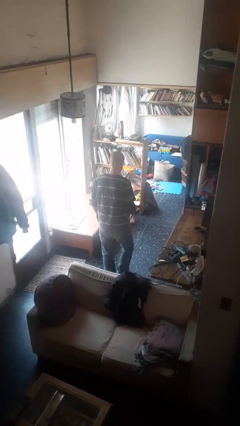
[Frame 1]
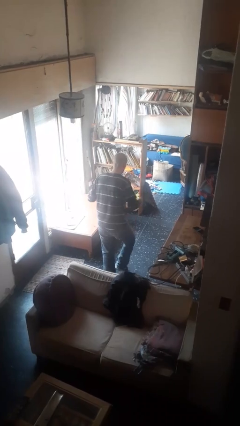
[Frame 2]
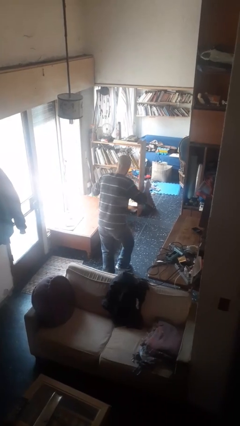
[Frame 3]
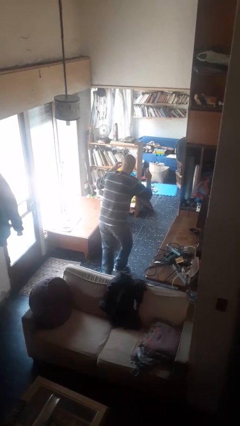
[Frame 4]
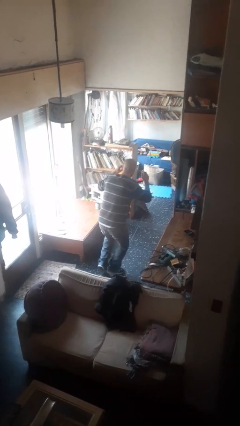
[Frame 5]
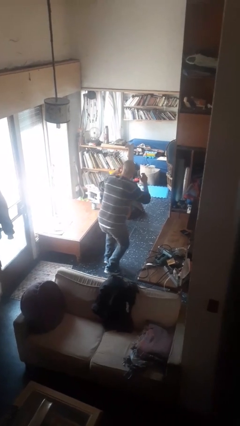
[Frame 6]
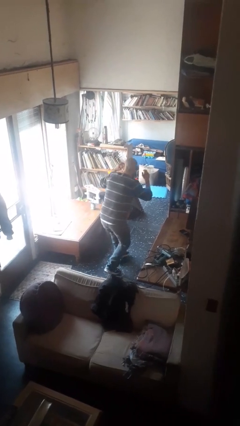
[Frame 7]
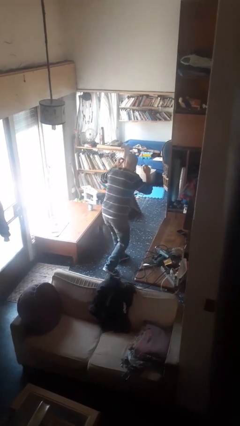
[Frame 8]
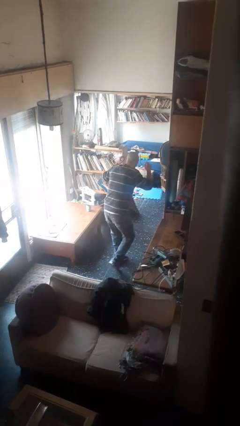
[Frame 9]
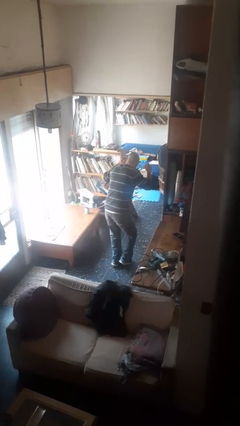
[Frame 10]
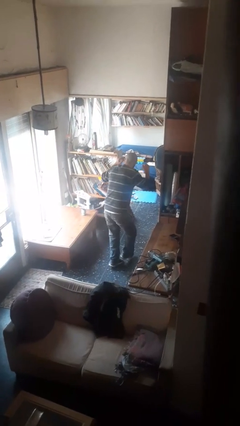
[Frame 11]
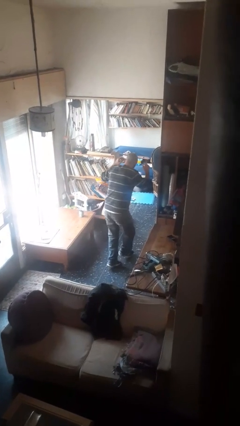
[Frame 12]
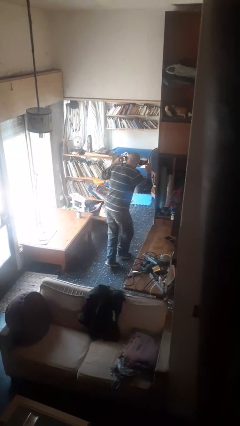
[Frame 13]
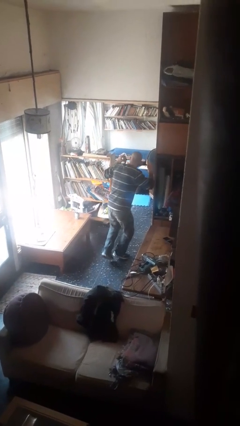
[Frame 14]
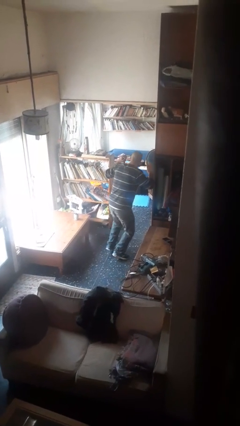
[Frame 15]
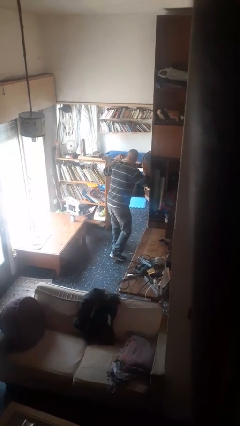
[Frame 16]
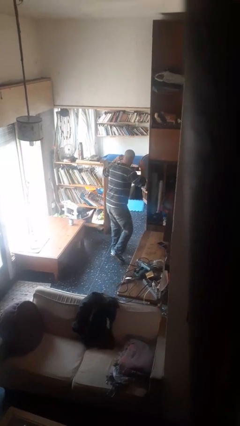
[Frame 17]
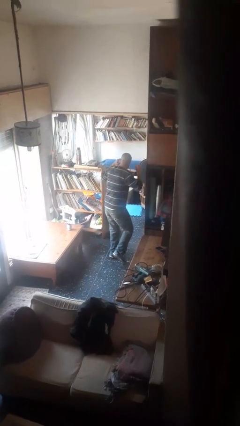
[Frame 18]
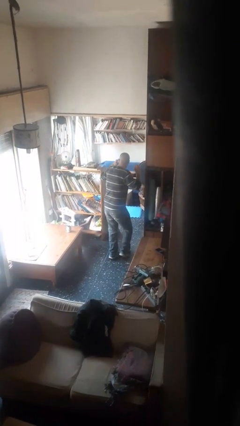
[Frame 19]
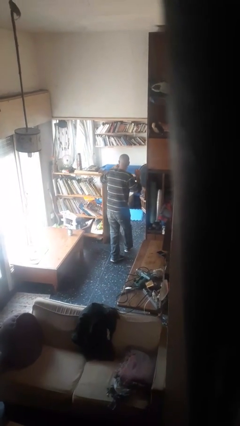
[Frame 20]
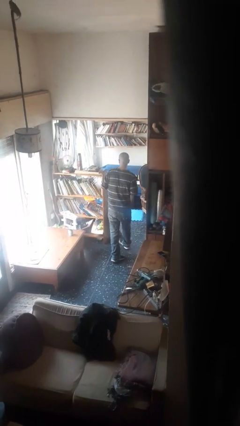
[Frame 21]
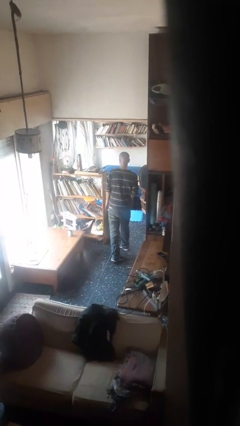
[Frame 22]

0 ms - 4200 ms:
person walks tiptoe

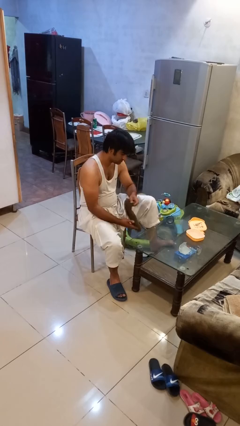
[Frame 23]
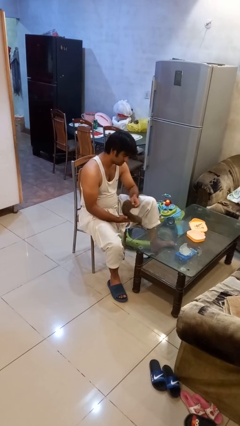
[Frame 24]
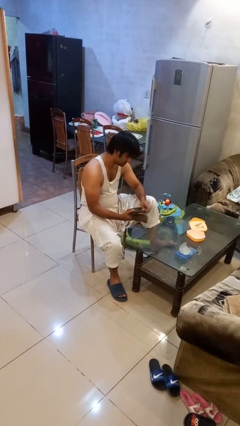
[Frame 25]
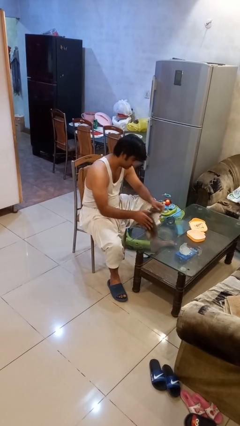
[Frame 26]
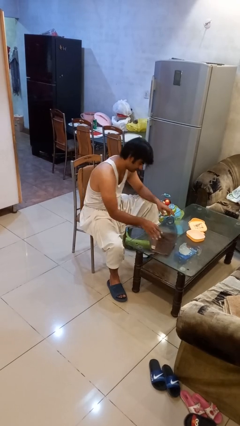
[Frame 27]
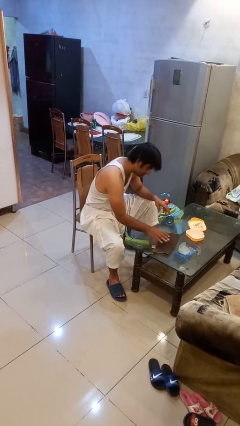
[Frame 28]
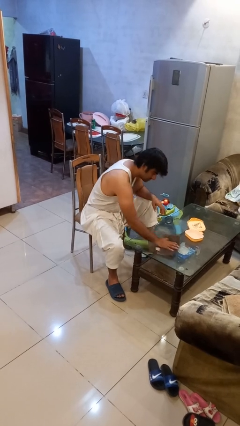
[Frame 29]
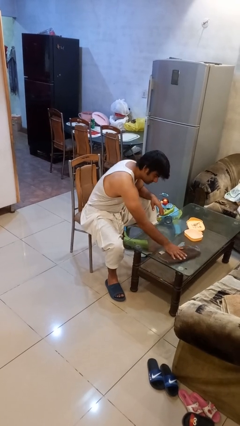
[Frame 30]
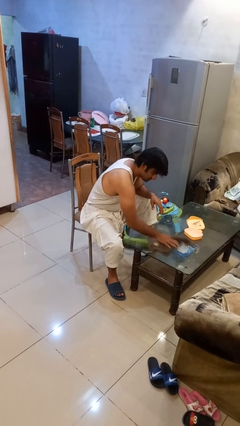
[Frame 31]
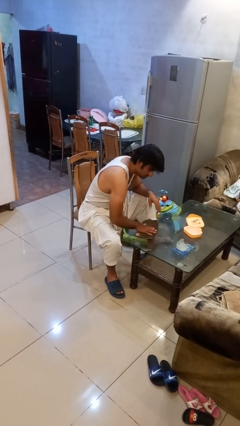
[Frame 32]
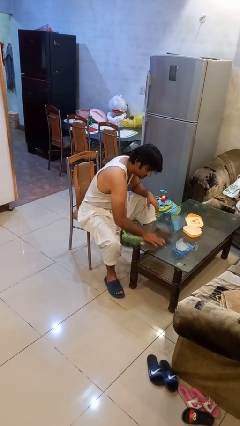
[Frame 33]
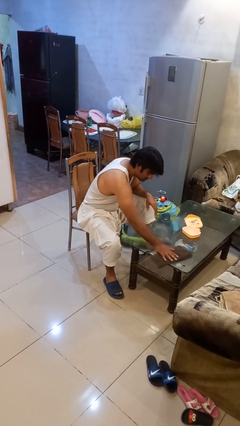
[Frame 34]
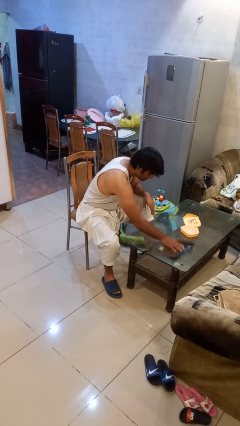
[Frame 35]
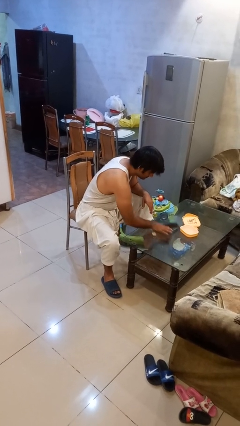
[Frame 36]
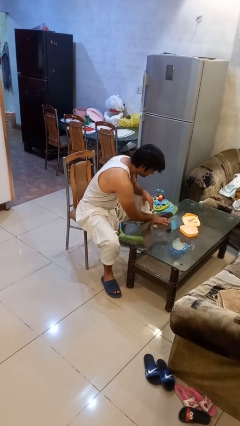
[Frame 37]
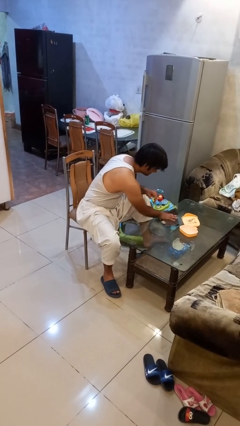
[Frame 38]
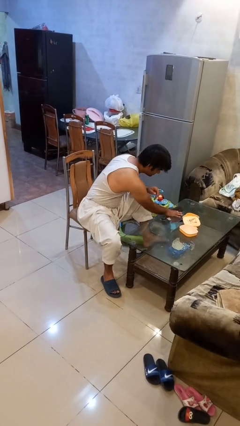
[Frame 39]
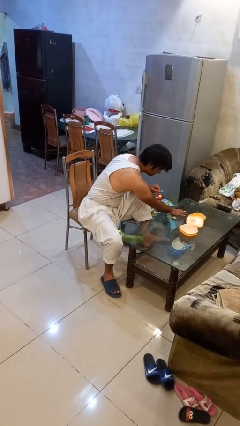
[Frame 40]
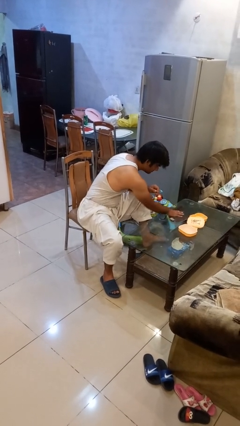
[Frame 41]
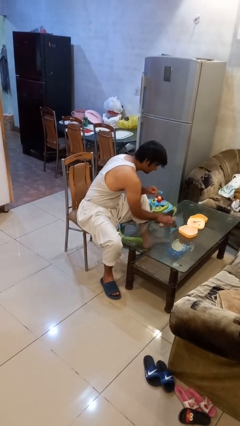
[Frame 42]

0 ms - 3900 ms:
person cleans table with rag

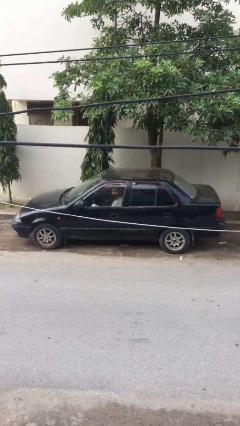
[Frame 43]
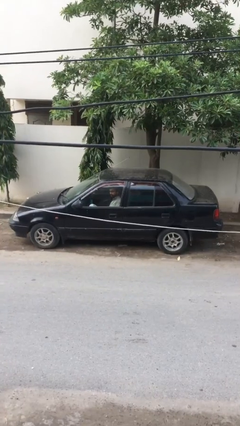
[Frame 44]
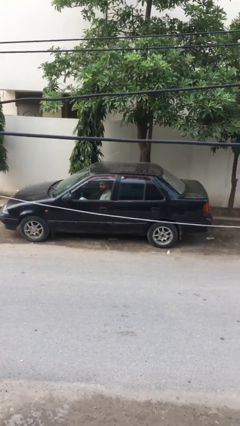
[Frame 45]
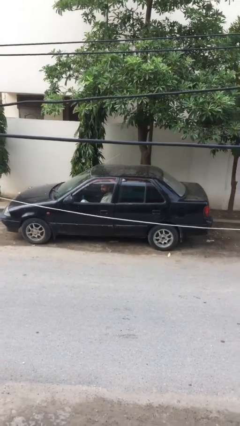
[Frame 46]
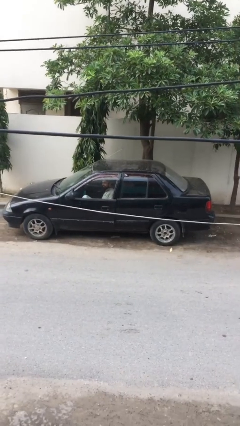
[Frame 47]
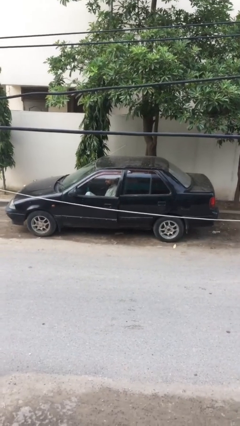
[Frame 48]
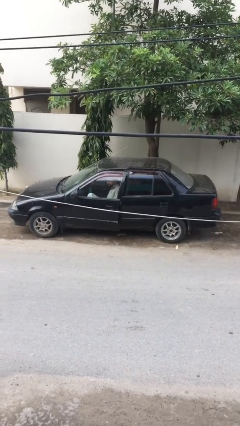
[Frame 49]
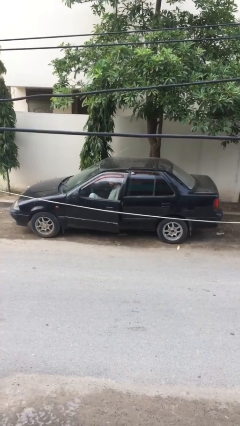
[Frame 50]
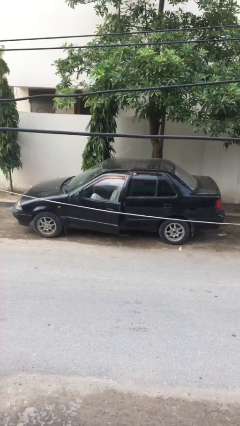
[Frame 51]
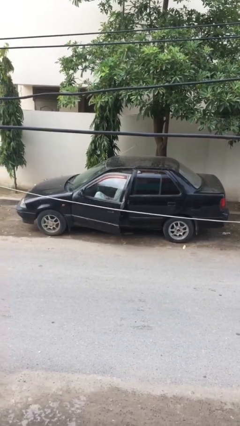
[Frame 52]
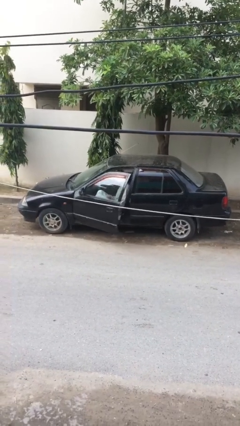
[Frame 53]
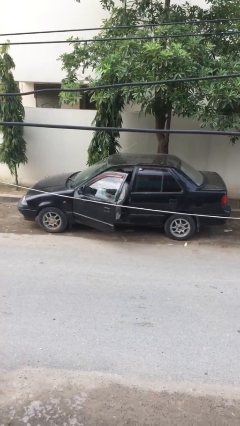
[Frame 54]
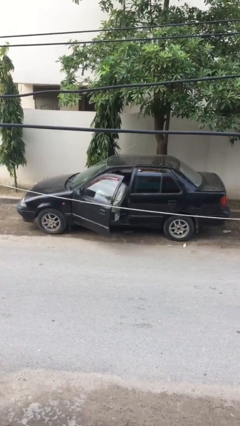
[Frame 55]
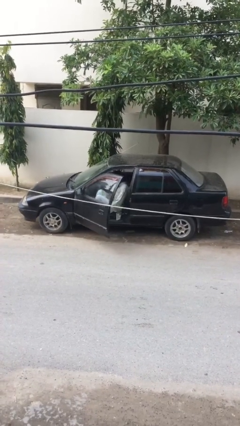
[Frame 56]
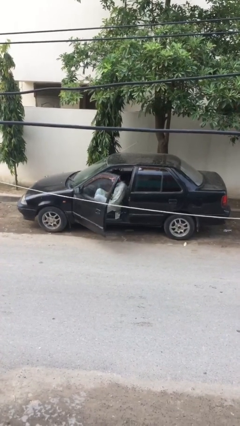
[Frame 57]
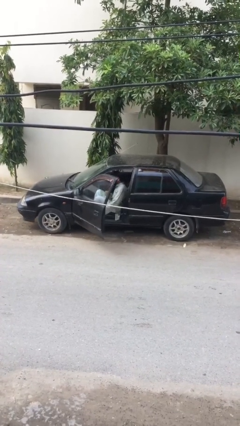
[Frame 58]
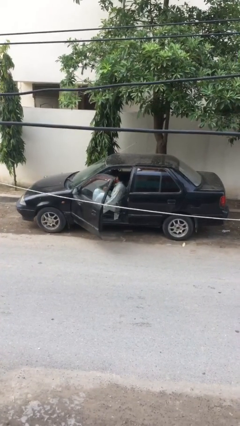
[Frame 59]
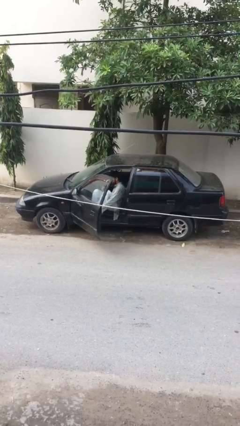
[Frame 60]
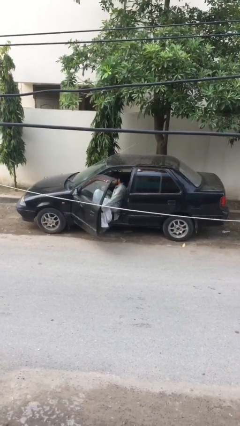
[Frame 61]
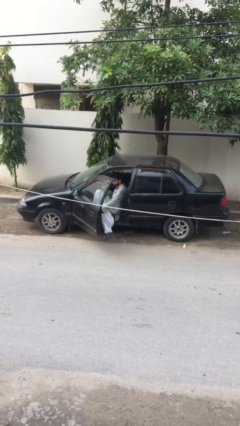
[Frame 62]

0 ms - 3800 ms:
person opens car door

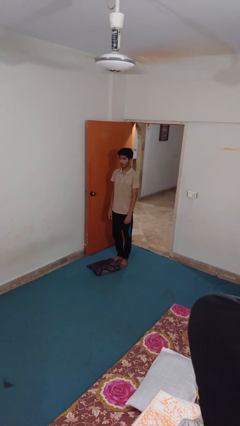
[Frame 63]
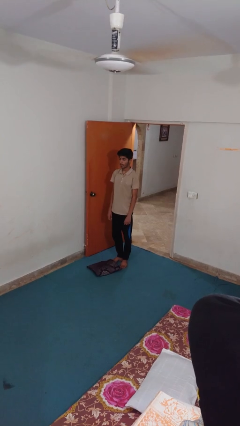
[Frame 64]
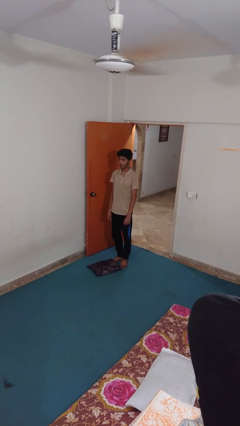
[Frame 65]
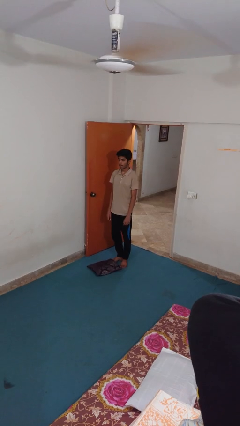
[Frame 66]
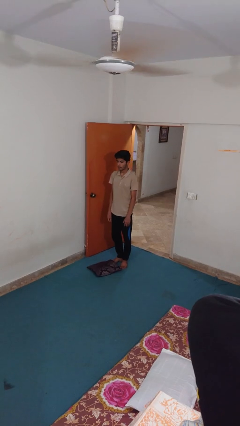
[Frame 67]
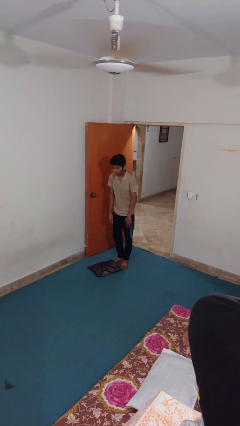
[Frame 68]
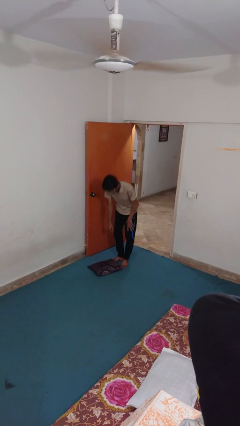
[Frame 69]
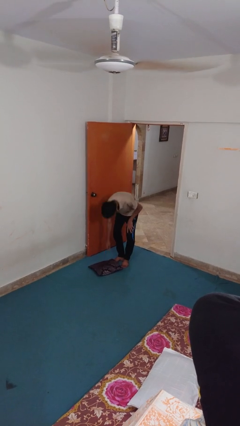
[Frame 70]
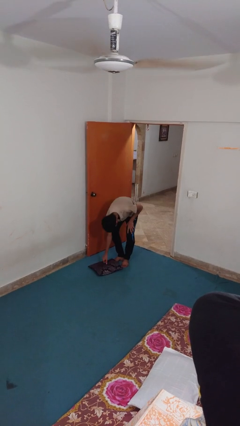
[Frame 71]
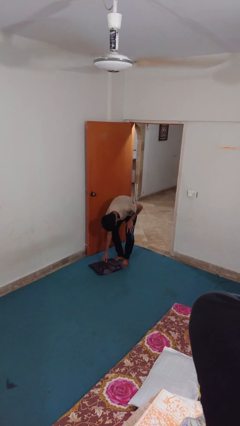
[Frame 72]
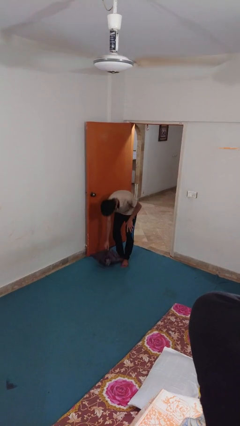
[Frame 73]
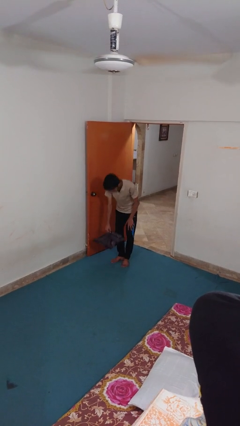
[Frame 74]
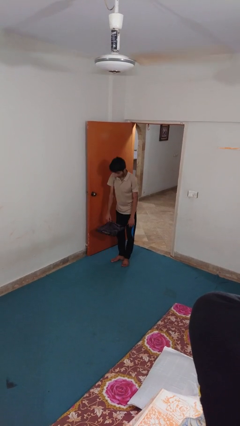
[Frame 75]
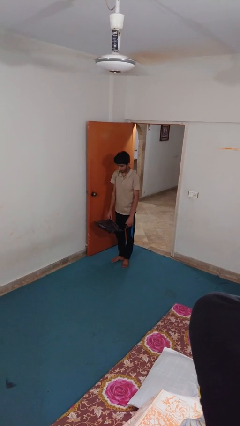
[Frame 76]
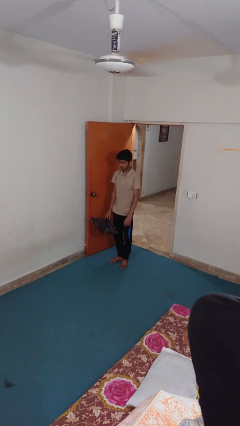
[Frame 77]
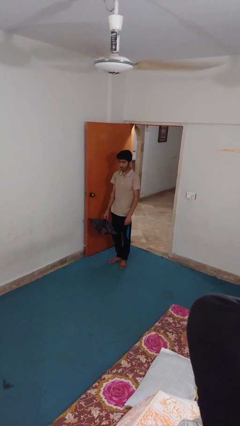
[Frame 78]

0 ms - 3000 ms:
person picks up object from floor

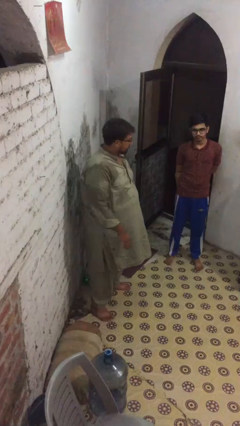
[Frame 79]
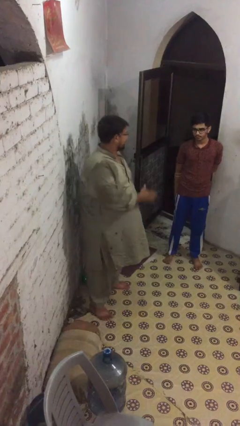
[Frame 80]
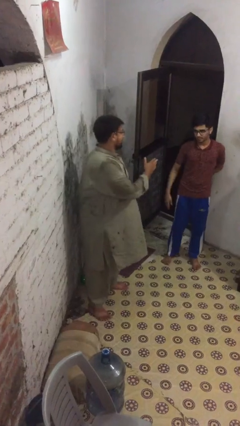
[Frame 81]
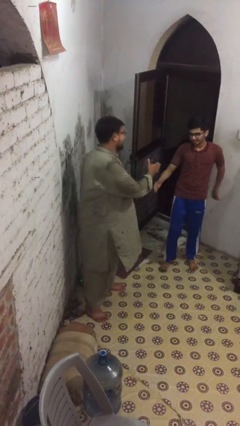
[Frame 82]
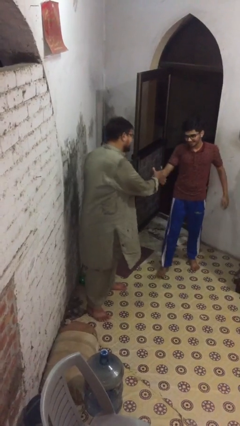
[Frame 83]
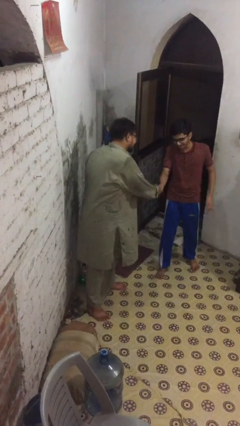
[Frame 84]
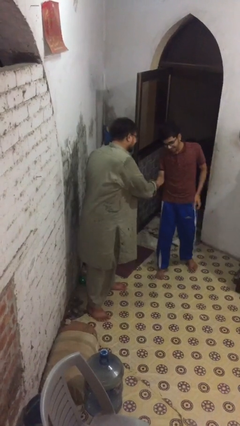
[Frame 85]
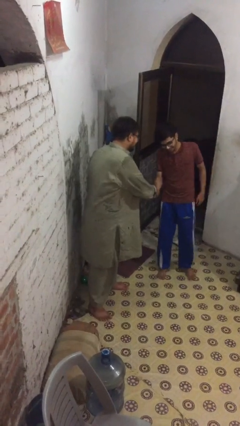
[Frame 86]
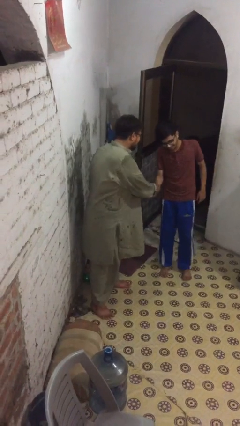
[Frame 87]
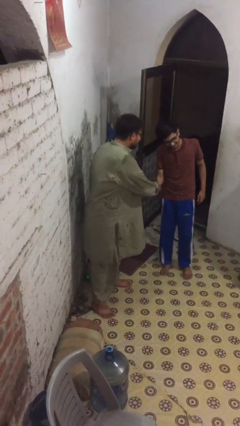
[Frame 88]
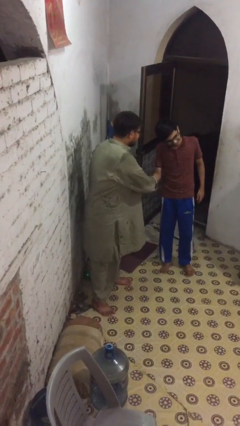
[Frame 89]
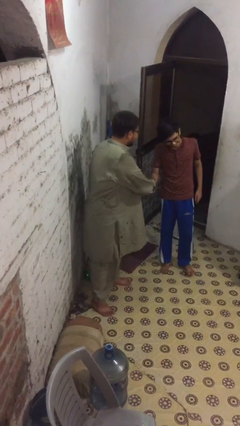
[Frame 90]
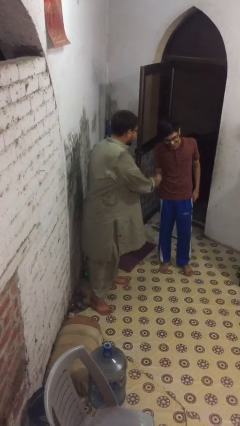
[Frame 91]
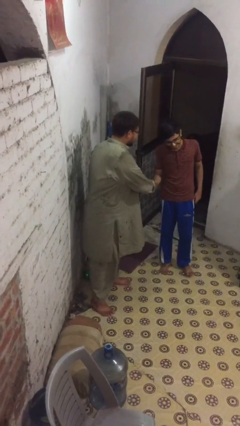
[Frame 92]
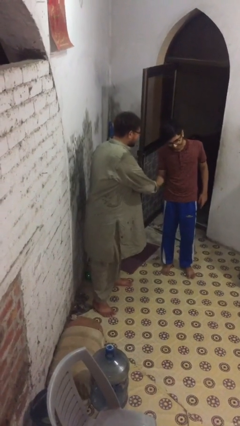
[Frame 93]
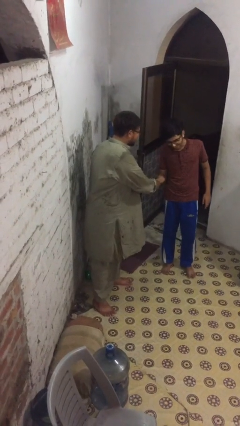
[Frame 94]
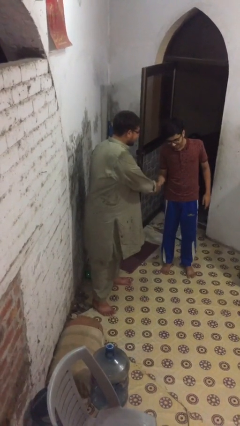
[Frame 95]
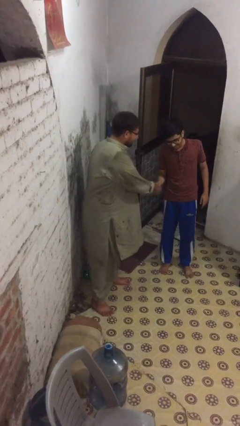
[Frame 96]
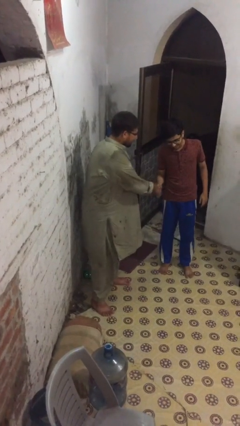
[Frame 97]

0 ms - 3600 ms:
person shakes hand
